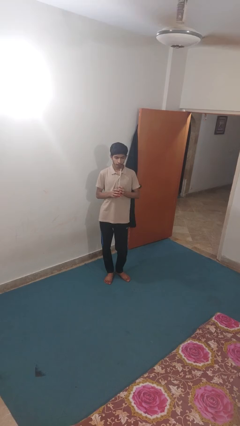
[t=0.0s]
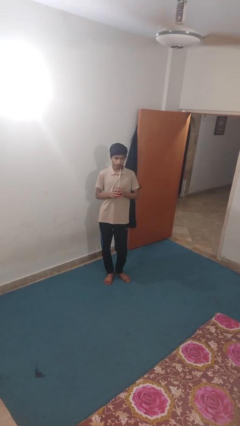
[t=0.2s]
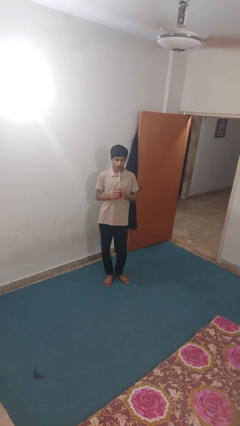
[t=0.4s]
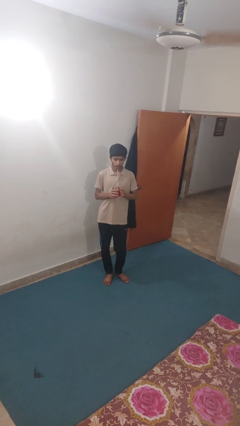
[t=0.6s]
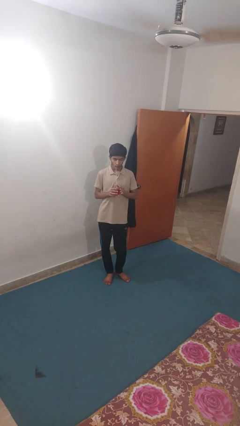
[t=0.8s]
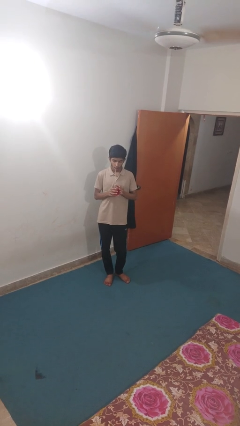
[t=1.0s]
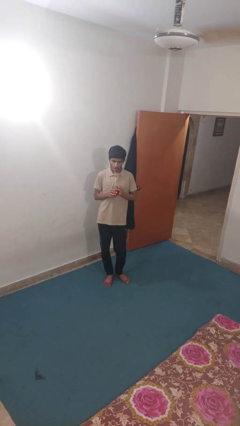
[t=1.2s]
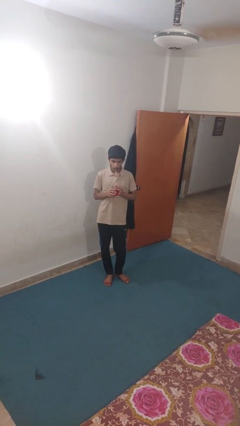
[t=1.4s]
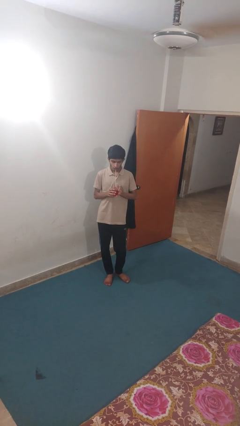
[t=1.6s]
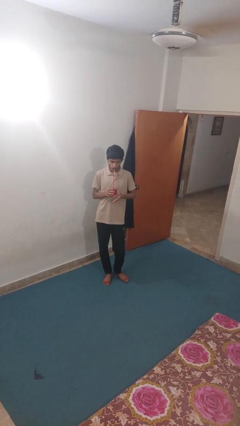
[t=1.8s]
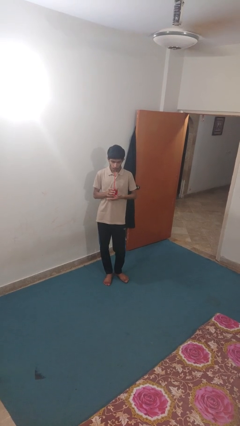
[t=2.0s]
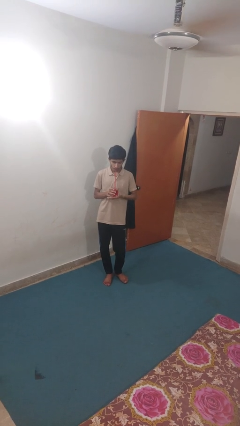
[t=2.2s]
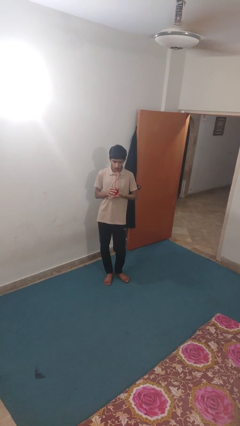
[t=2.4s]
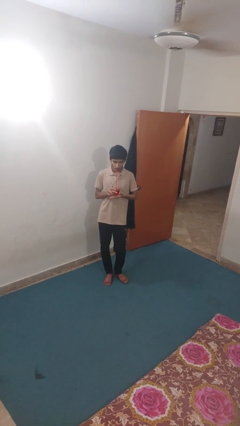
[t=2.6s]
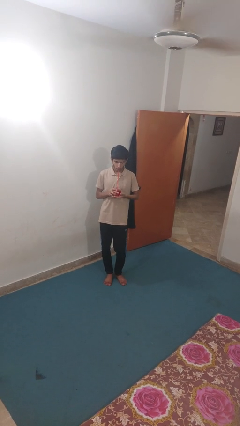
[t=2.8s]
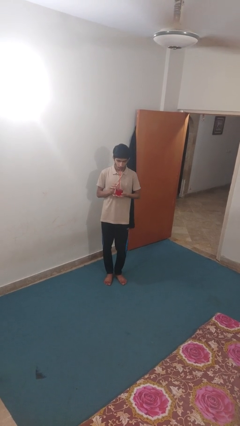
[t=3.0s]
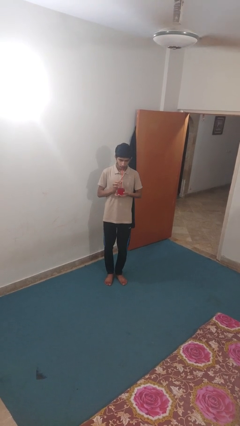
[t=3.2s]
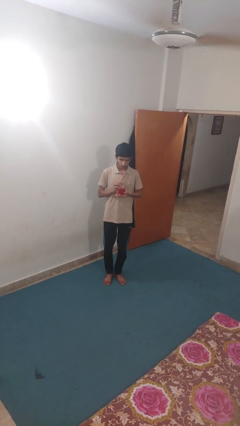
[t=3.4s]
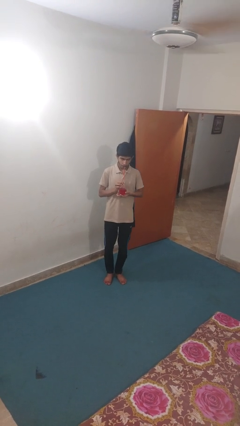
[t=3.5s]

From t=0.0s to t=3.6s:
person drinks from straw

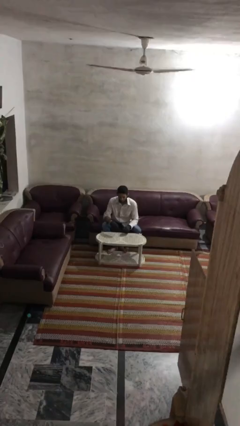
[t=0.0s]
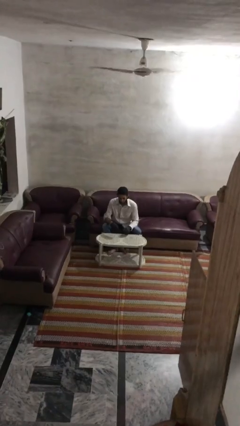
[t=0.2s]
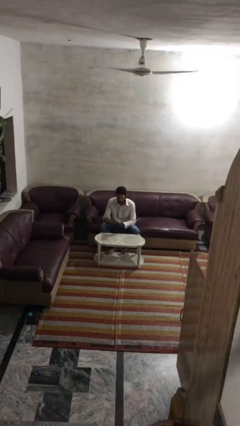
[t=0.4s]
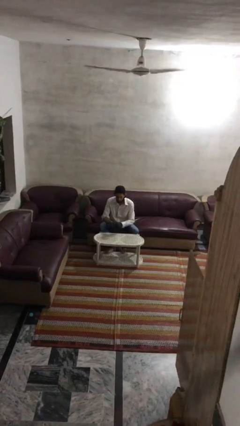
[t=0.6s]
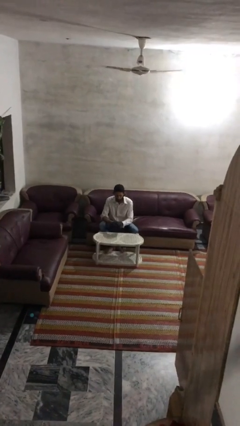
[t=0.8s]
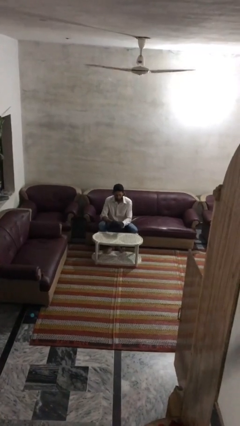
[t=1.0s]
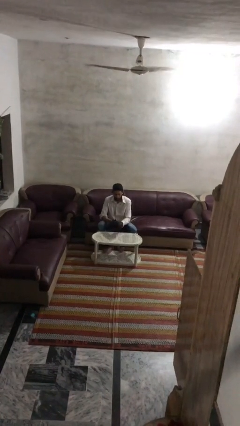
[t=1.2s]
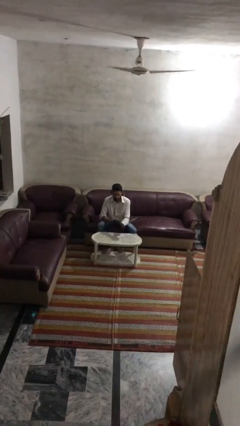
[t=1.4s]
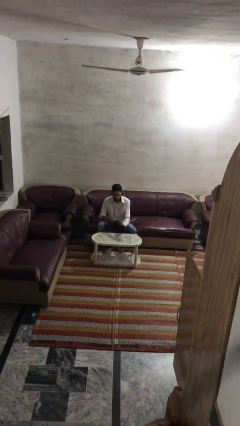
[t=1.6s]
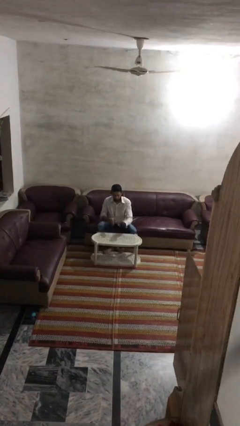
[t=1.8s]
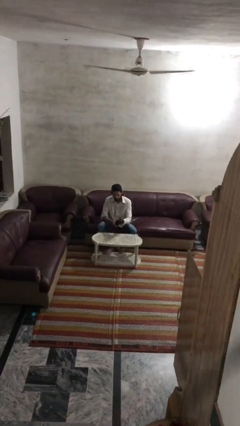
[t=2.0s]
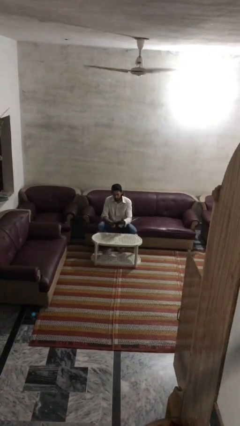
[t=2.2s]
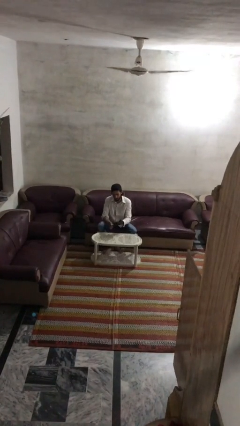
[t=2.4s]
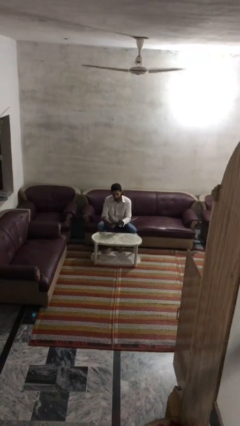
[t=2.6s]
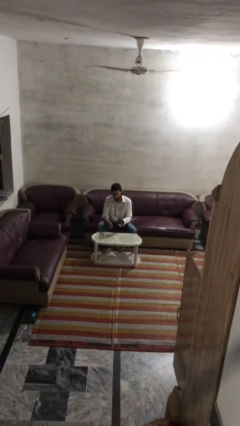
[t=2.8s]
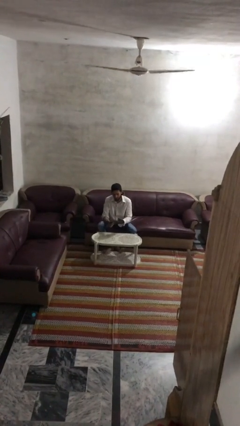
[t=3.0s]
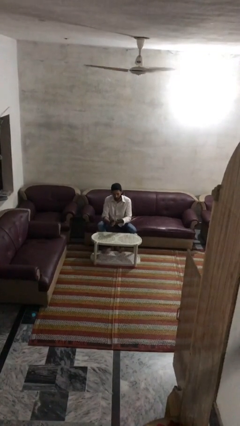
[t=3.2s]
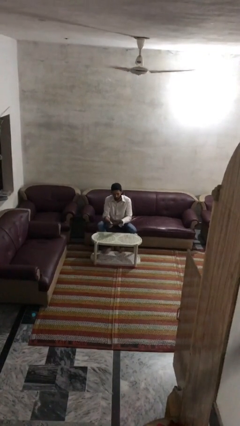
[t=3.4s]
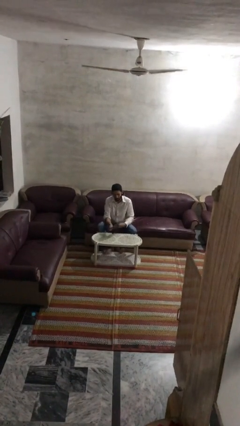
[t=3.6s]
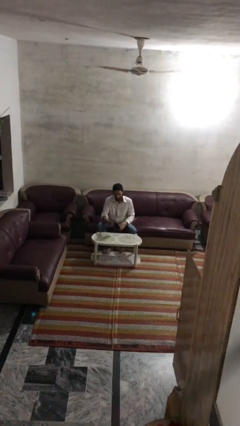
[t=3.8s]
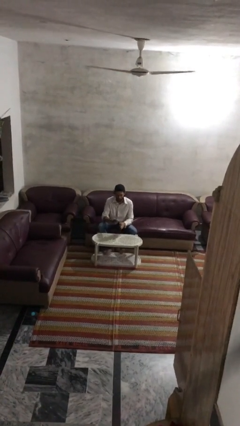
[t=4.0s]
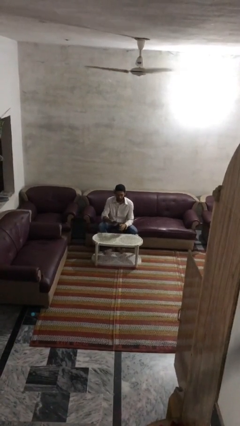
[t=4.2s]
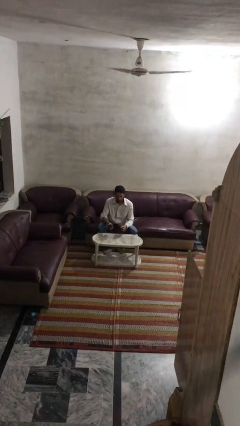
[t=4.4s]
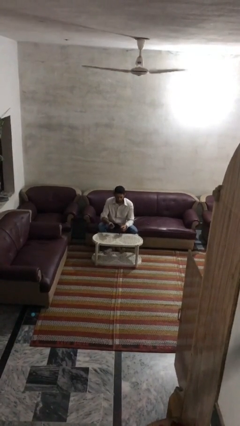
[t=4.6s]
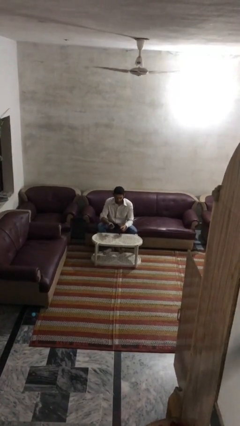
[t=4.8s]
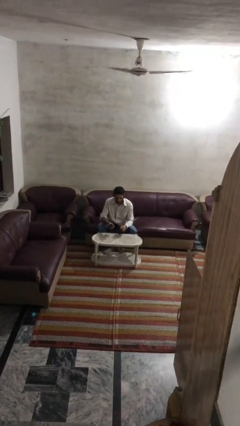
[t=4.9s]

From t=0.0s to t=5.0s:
person takes off gloves

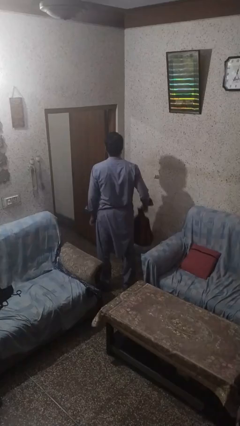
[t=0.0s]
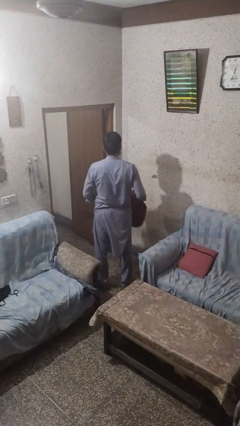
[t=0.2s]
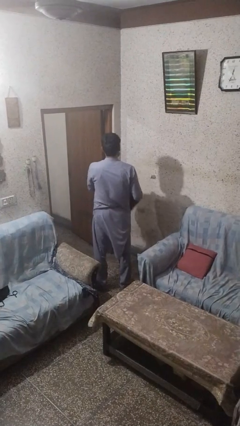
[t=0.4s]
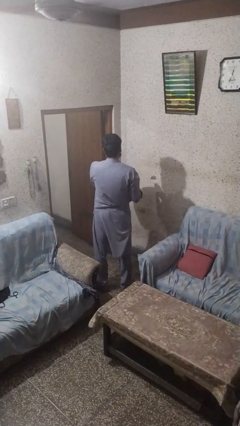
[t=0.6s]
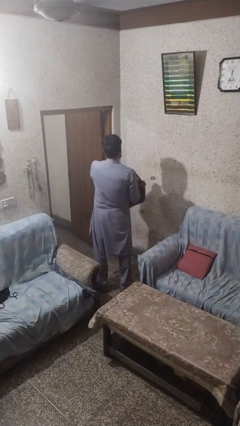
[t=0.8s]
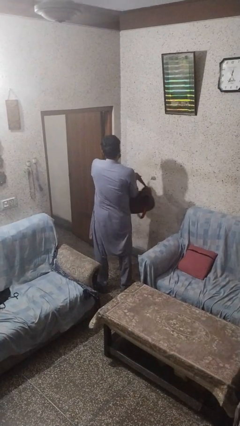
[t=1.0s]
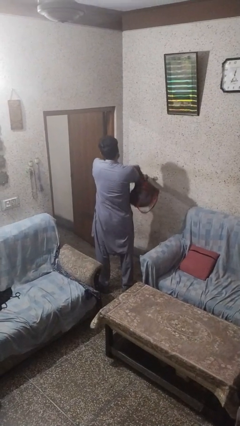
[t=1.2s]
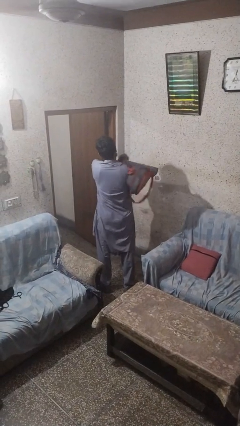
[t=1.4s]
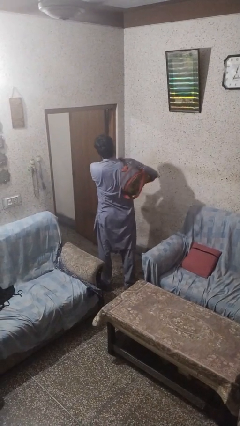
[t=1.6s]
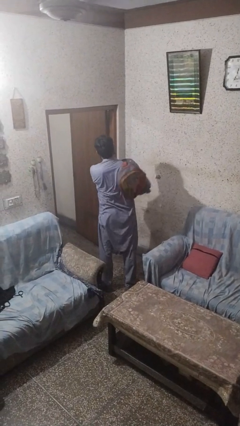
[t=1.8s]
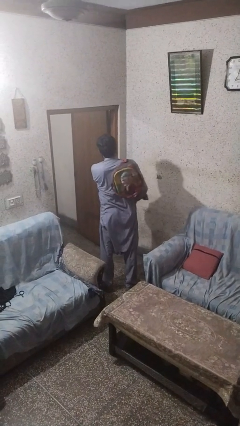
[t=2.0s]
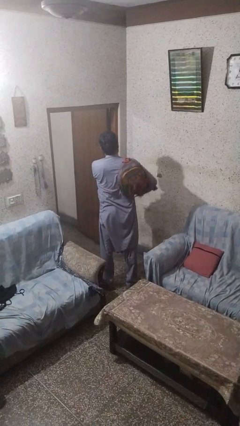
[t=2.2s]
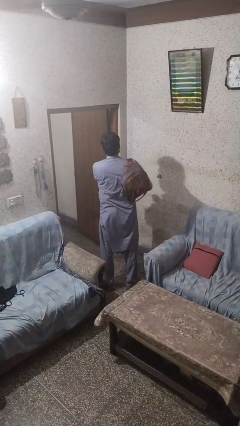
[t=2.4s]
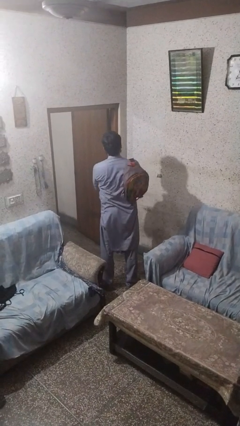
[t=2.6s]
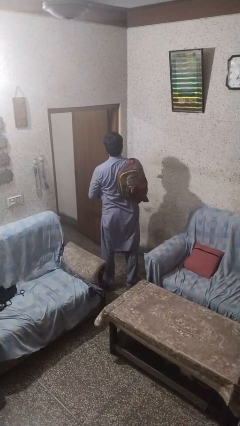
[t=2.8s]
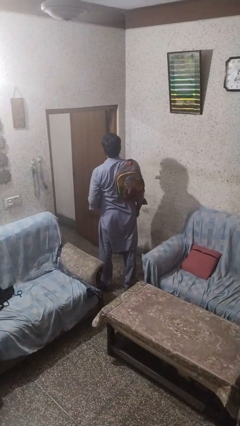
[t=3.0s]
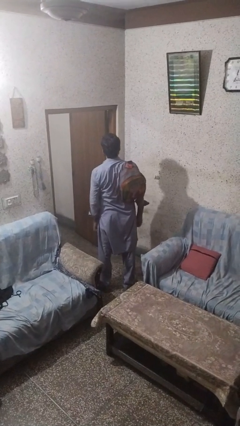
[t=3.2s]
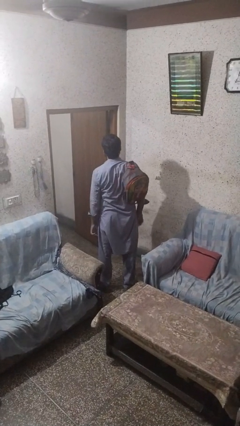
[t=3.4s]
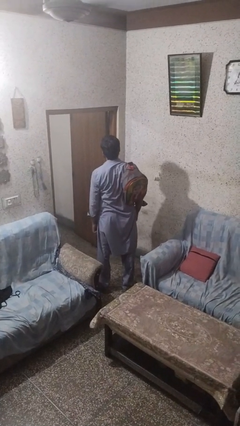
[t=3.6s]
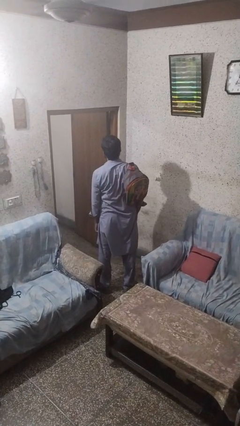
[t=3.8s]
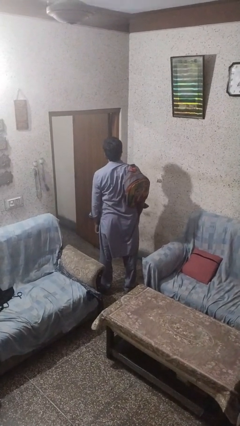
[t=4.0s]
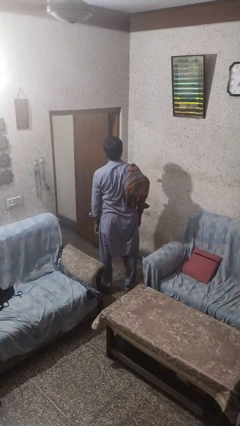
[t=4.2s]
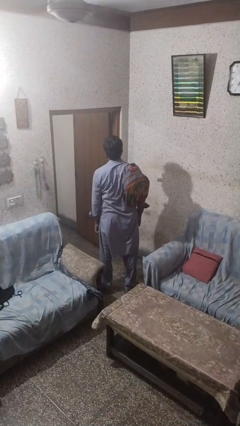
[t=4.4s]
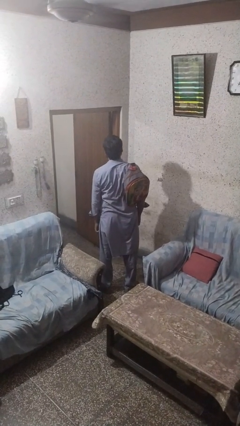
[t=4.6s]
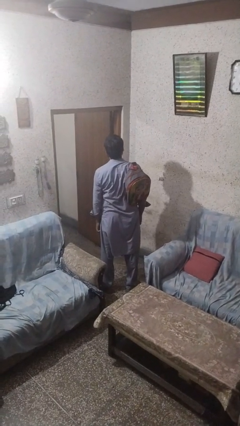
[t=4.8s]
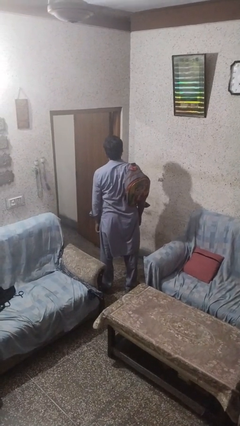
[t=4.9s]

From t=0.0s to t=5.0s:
person puts on backpack

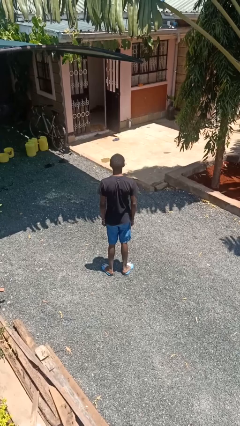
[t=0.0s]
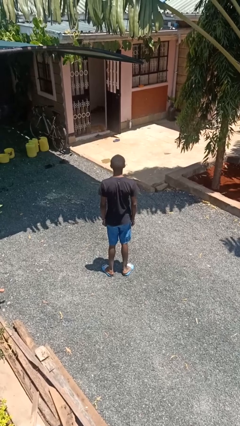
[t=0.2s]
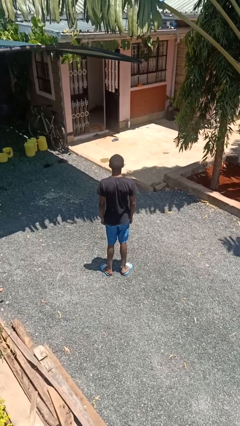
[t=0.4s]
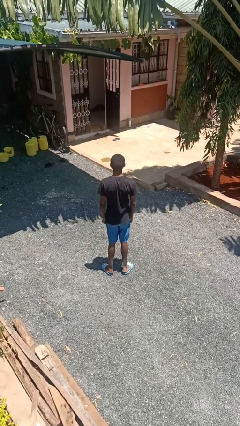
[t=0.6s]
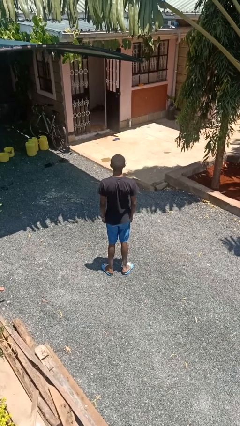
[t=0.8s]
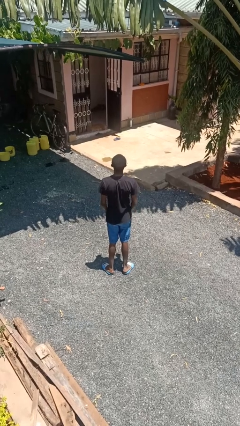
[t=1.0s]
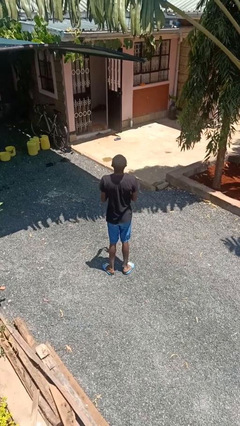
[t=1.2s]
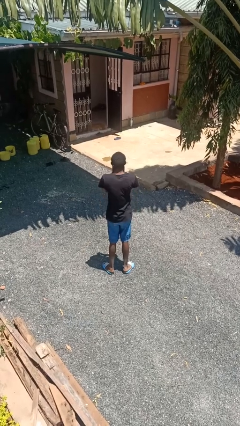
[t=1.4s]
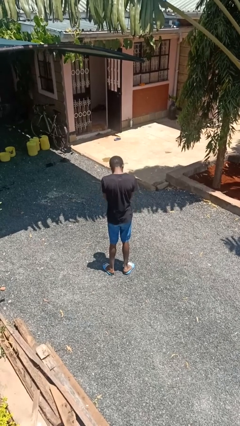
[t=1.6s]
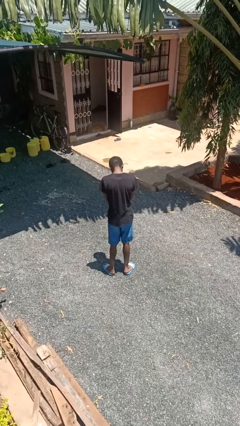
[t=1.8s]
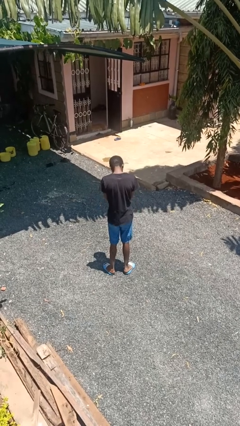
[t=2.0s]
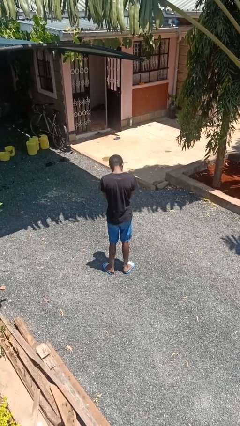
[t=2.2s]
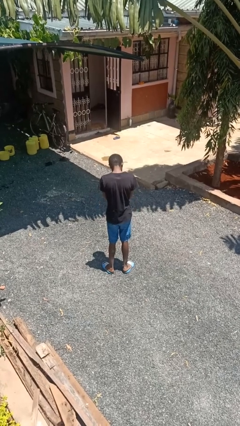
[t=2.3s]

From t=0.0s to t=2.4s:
person sneezes into hand

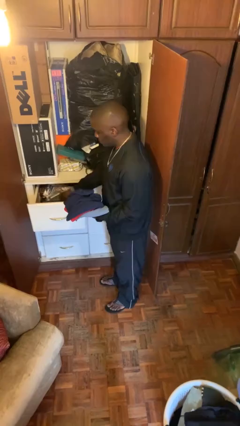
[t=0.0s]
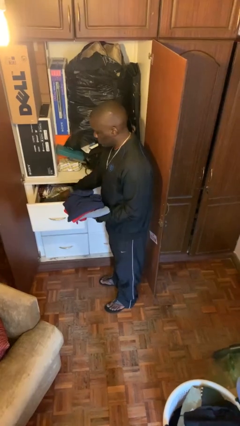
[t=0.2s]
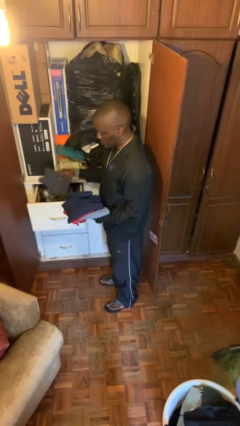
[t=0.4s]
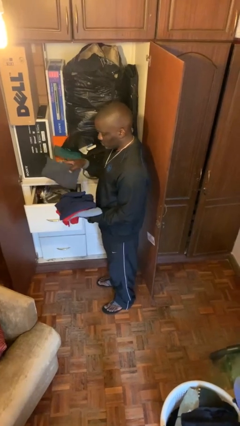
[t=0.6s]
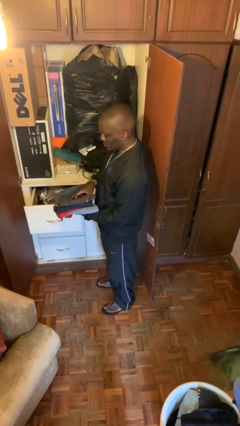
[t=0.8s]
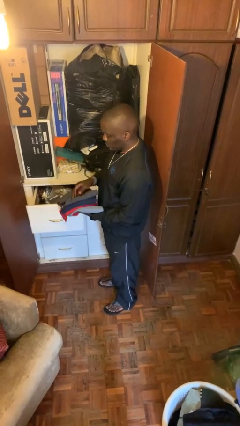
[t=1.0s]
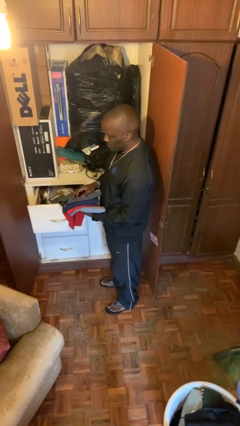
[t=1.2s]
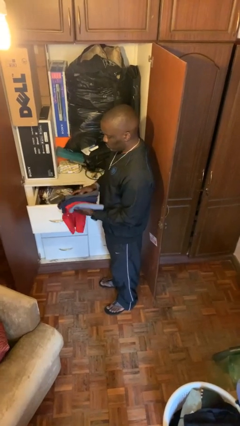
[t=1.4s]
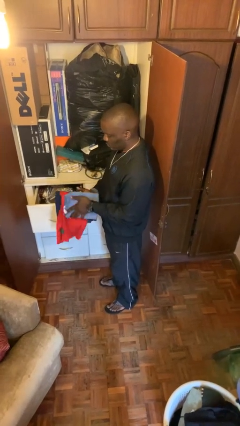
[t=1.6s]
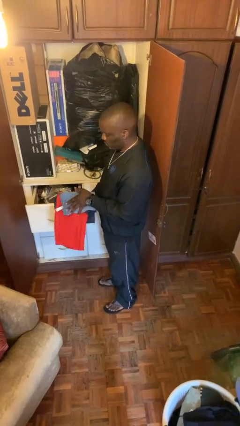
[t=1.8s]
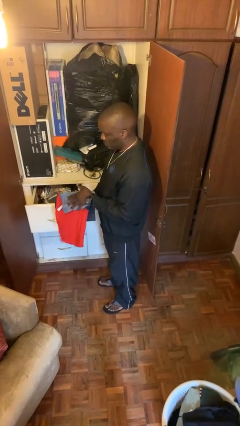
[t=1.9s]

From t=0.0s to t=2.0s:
person takes clothes from dresser
